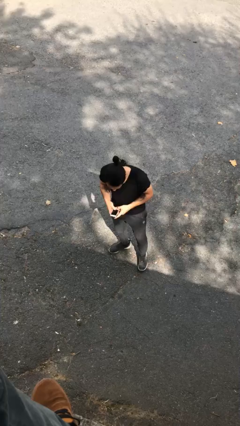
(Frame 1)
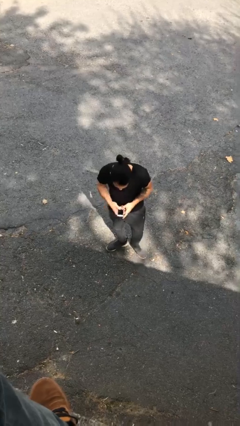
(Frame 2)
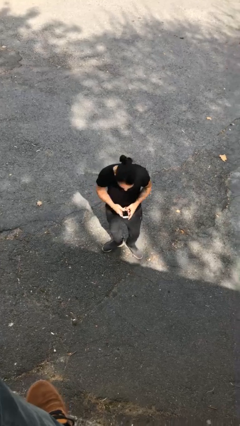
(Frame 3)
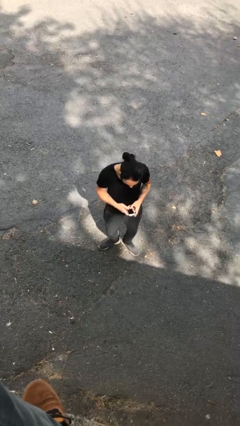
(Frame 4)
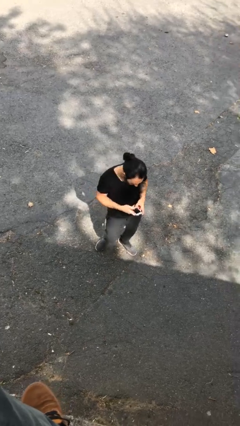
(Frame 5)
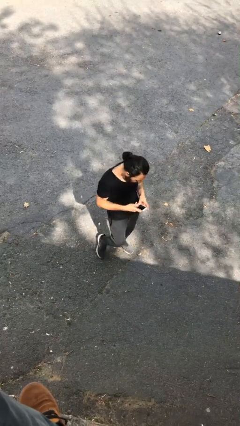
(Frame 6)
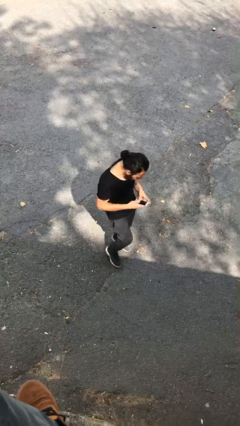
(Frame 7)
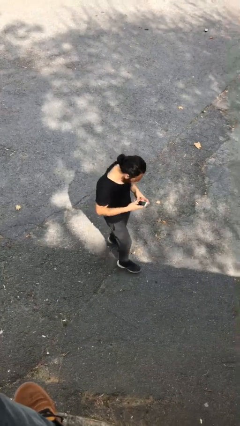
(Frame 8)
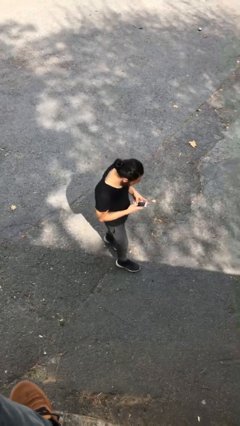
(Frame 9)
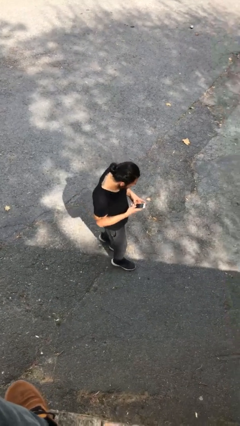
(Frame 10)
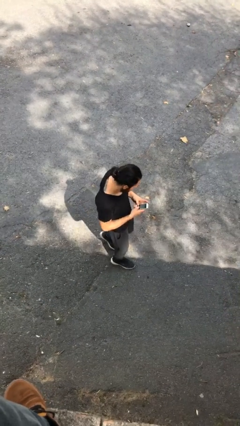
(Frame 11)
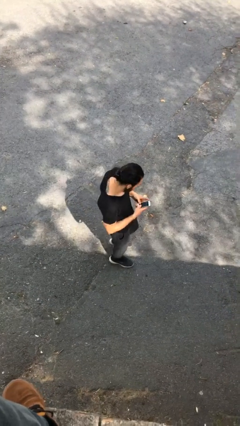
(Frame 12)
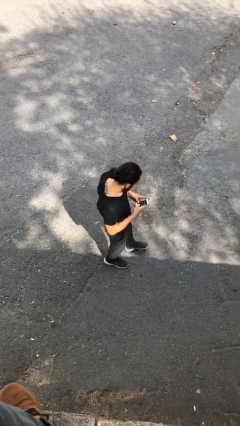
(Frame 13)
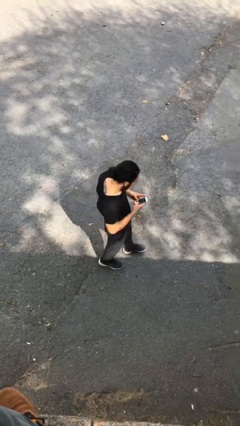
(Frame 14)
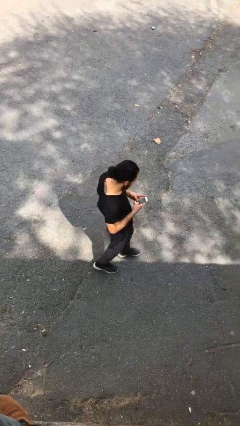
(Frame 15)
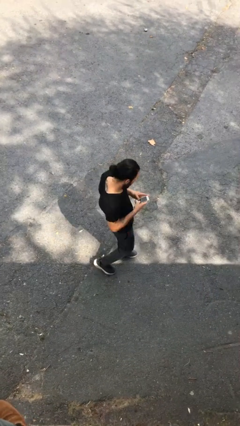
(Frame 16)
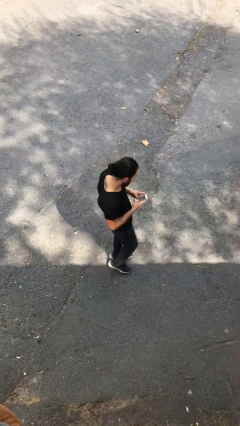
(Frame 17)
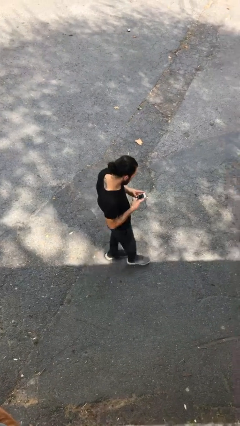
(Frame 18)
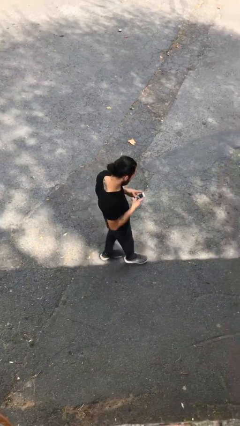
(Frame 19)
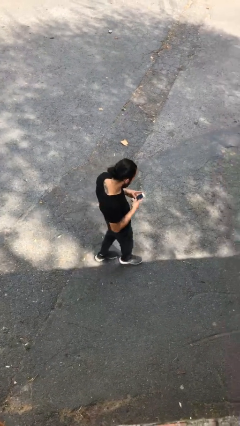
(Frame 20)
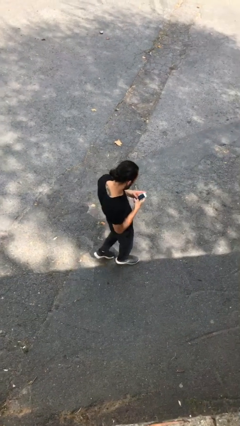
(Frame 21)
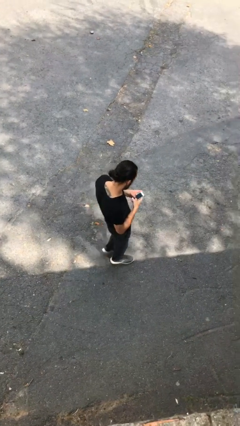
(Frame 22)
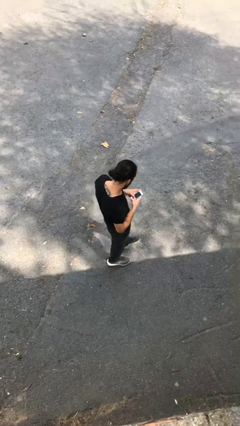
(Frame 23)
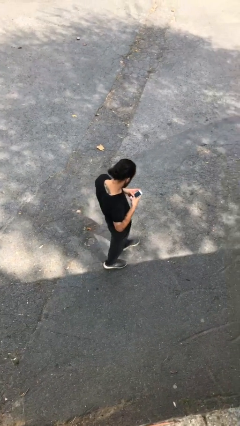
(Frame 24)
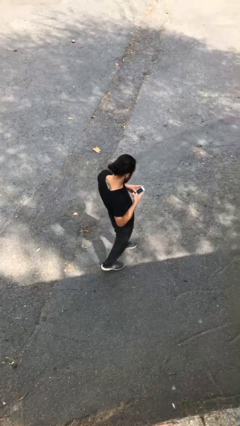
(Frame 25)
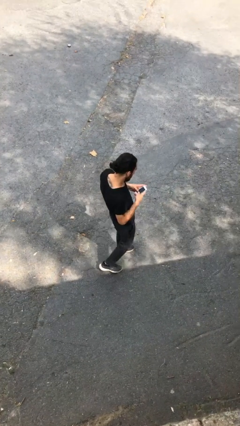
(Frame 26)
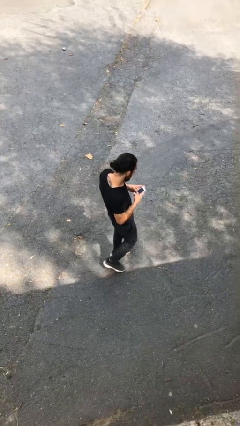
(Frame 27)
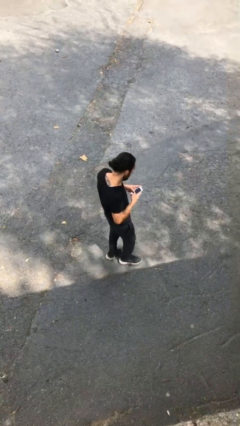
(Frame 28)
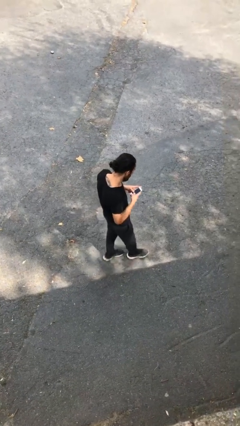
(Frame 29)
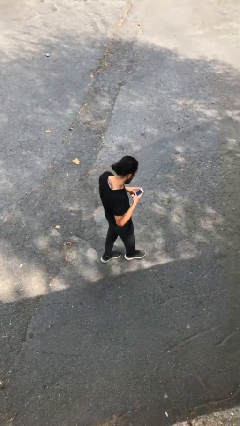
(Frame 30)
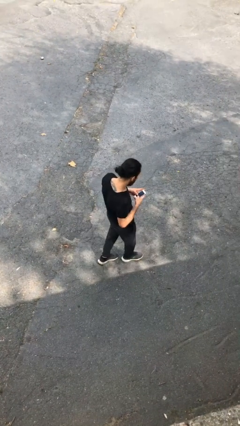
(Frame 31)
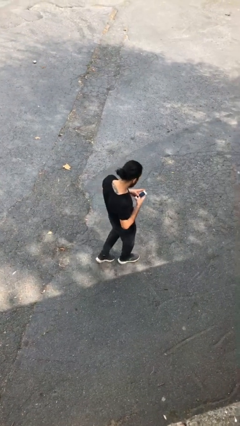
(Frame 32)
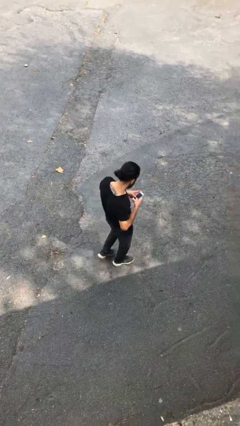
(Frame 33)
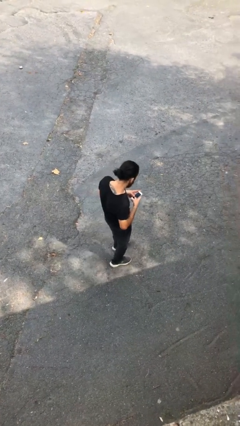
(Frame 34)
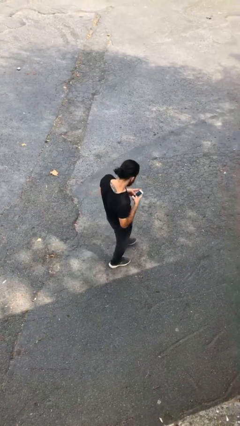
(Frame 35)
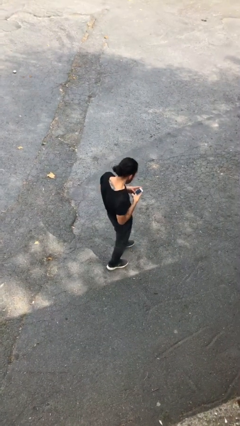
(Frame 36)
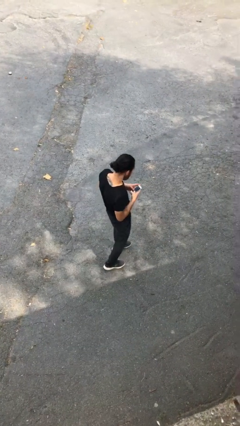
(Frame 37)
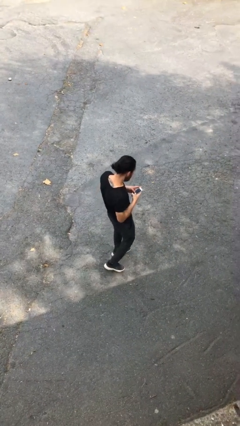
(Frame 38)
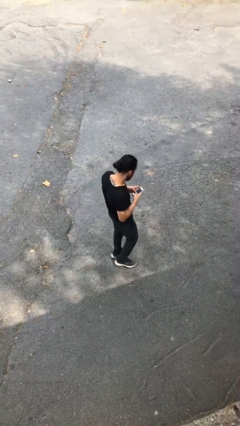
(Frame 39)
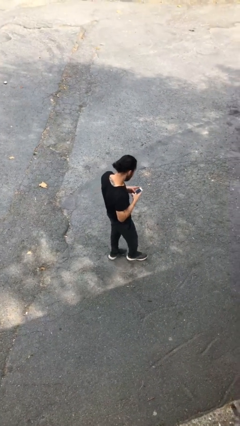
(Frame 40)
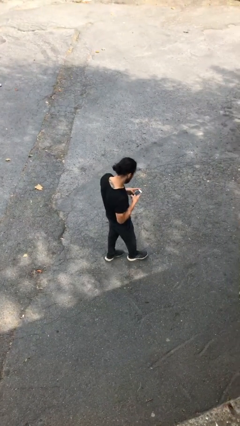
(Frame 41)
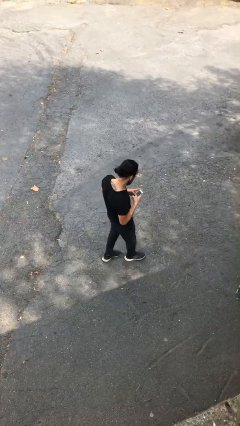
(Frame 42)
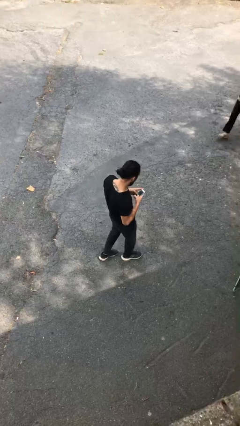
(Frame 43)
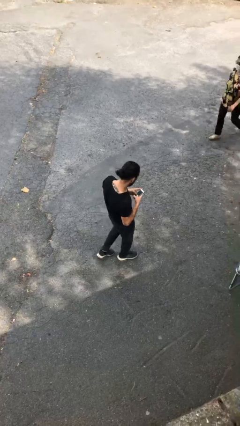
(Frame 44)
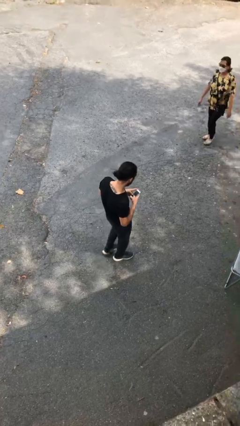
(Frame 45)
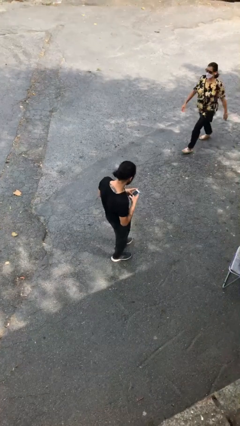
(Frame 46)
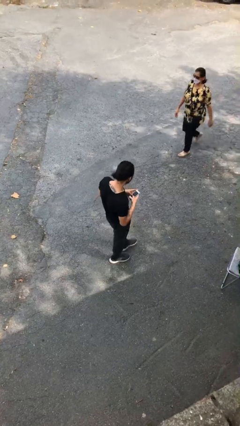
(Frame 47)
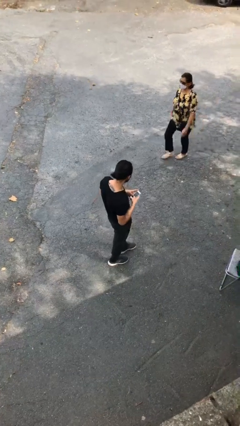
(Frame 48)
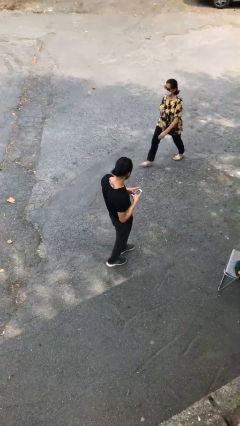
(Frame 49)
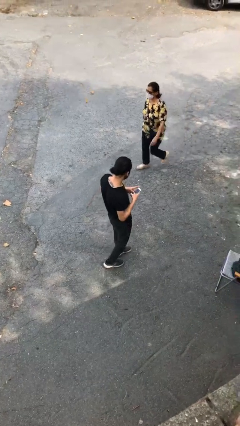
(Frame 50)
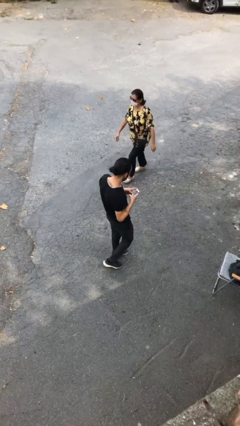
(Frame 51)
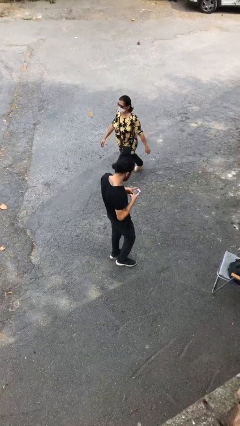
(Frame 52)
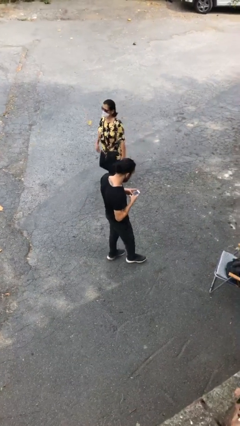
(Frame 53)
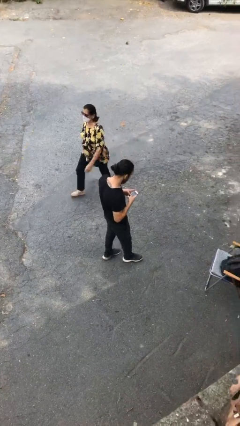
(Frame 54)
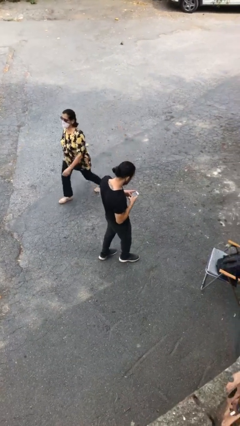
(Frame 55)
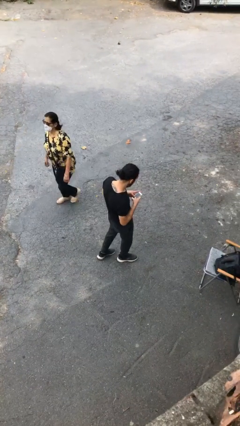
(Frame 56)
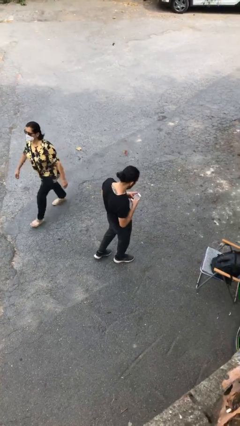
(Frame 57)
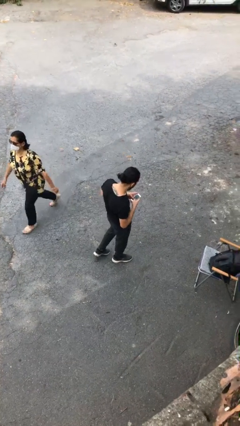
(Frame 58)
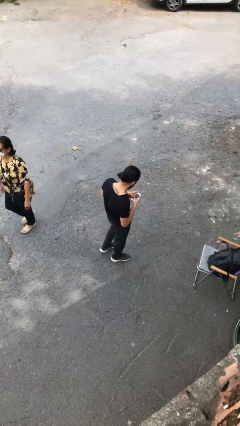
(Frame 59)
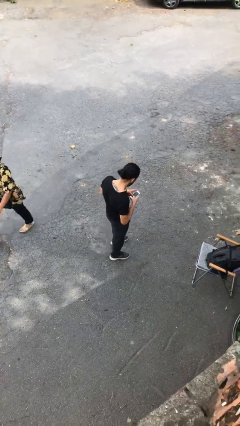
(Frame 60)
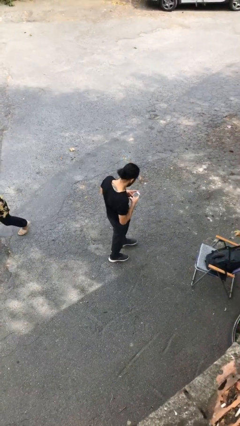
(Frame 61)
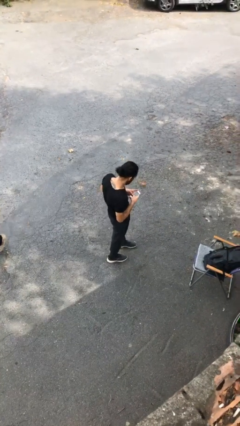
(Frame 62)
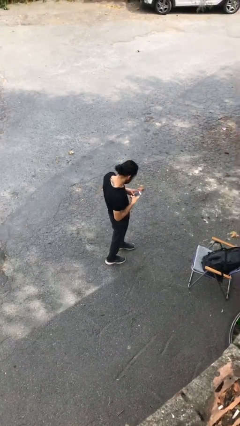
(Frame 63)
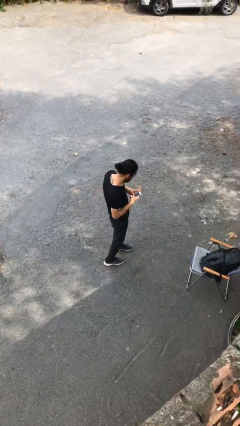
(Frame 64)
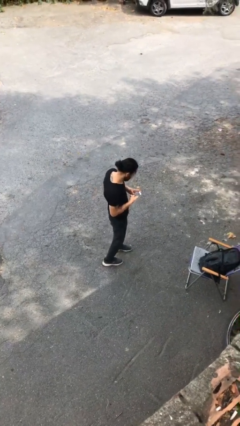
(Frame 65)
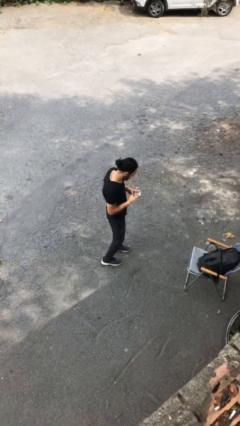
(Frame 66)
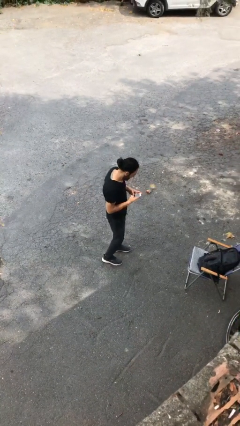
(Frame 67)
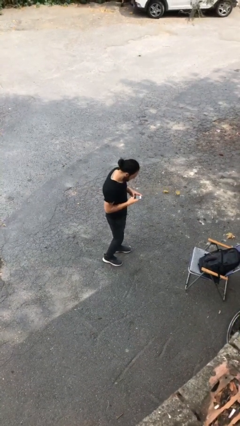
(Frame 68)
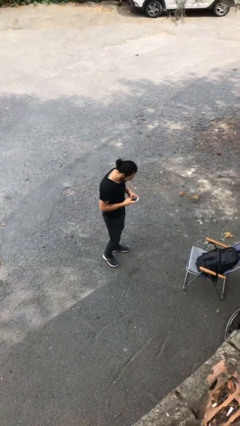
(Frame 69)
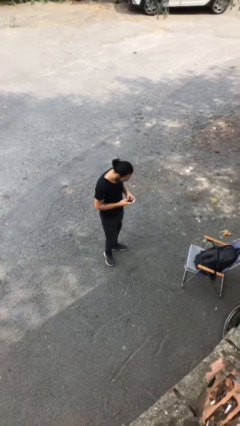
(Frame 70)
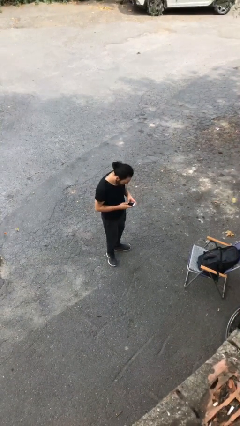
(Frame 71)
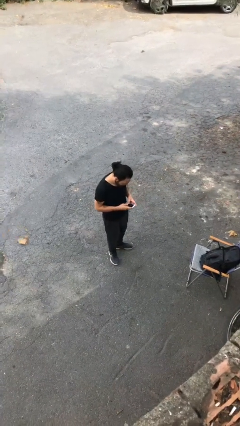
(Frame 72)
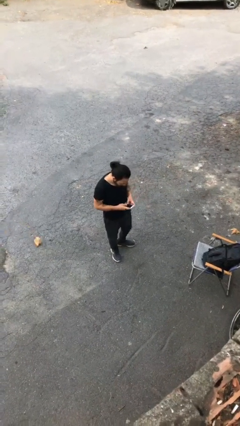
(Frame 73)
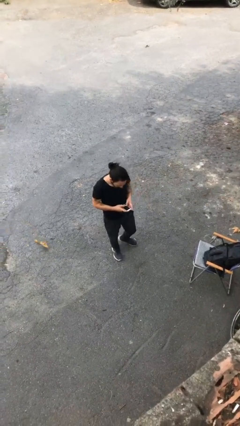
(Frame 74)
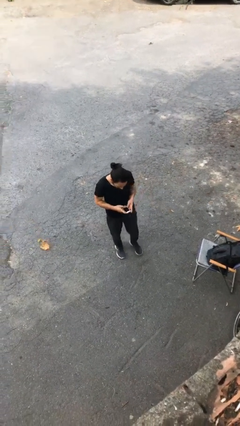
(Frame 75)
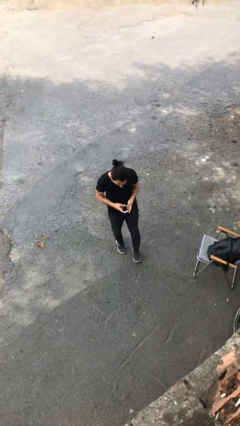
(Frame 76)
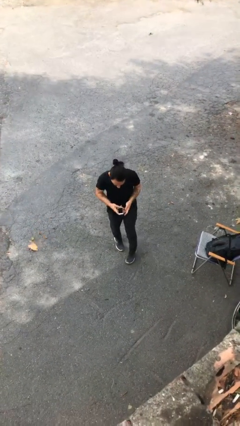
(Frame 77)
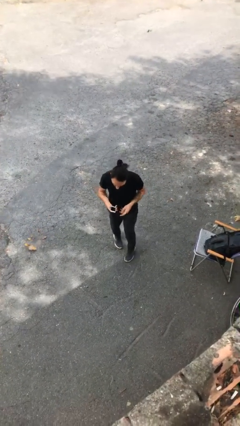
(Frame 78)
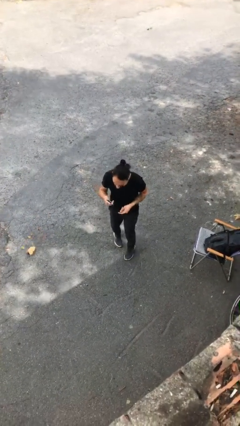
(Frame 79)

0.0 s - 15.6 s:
person texts on phone

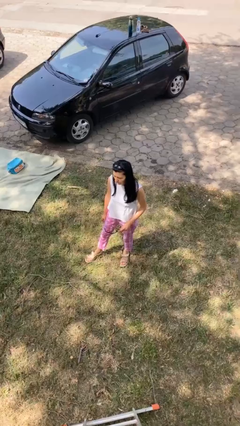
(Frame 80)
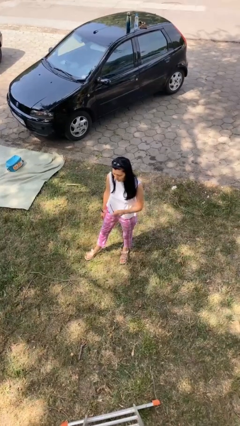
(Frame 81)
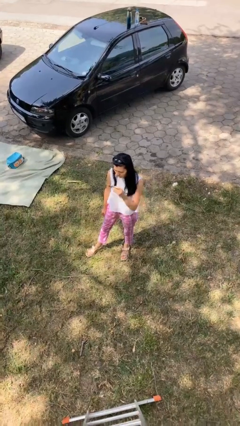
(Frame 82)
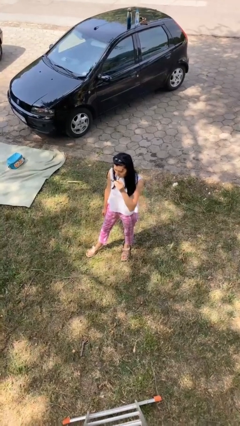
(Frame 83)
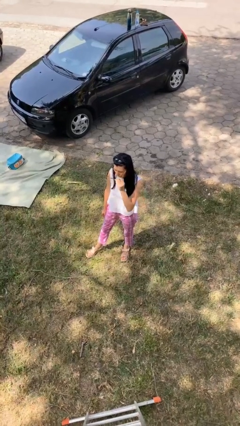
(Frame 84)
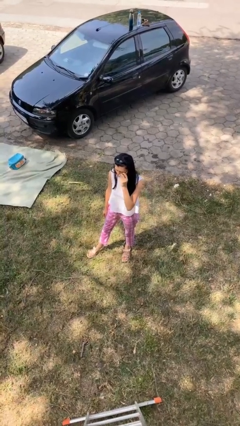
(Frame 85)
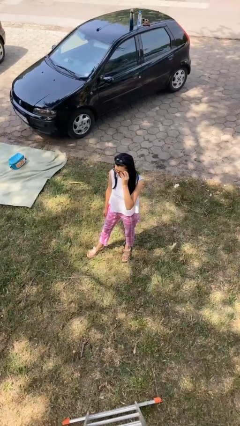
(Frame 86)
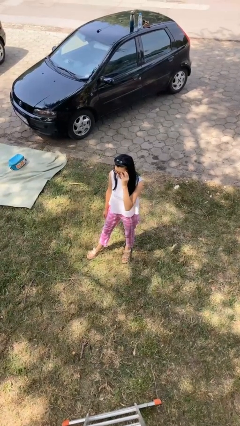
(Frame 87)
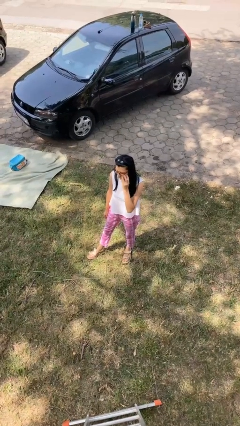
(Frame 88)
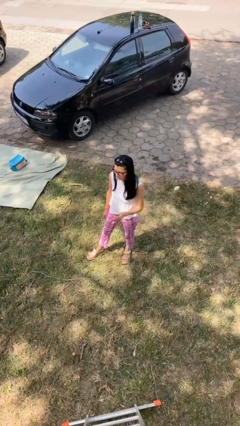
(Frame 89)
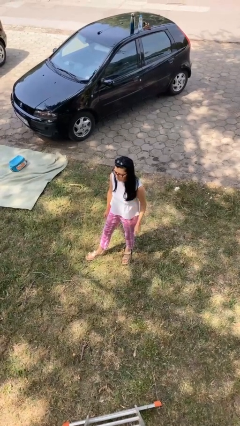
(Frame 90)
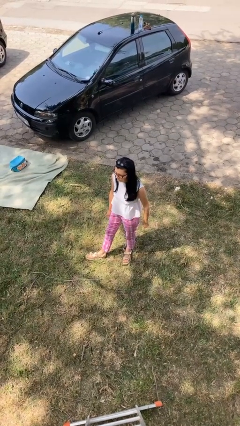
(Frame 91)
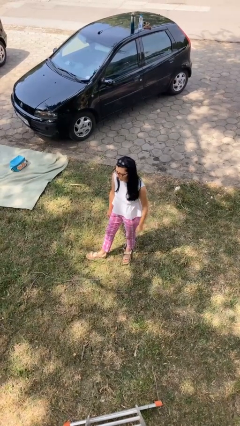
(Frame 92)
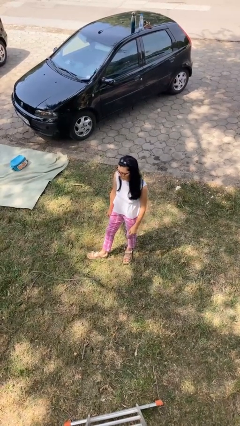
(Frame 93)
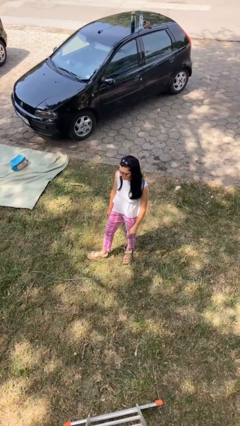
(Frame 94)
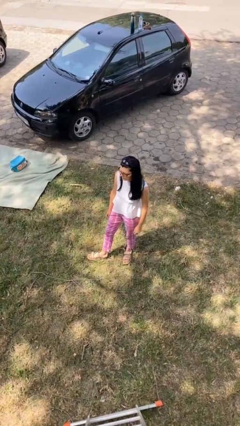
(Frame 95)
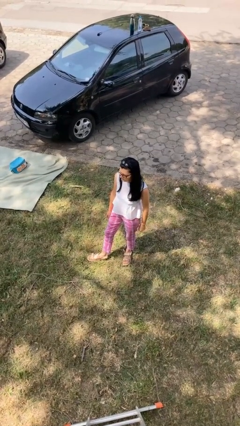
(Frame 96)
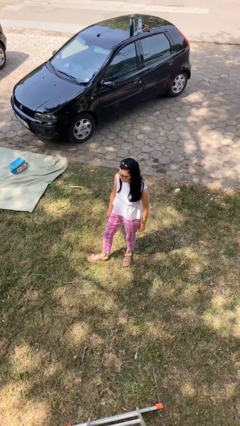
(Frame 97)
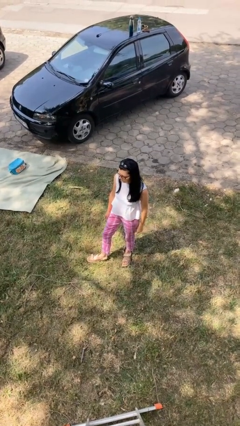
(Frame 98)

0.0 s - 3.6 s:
person puts on glasses
